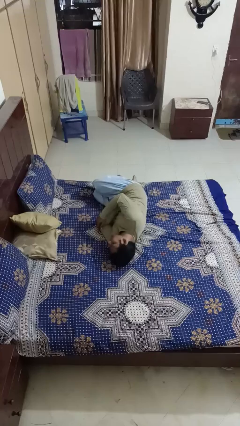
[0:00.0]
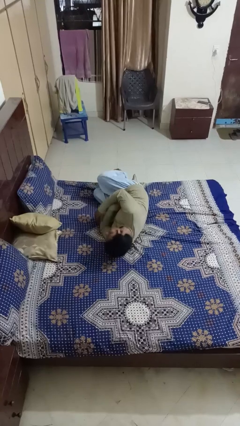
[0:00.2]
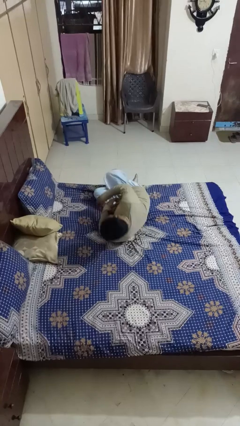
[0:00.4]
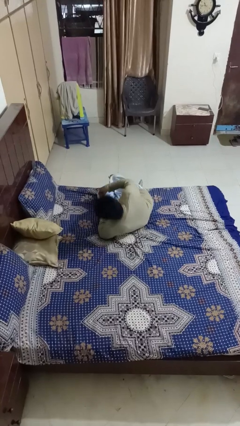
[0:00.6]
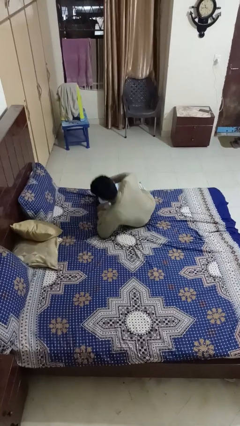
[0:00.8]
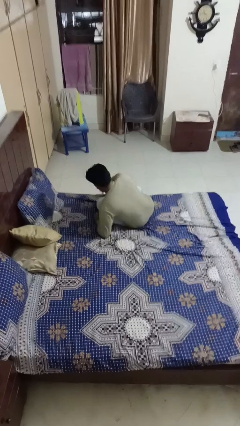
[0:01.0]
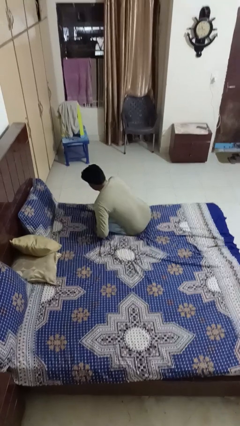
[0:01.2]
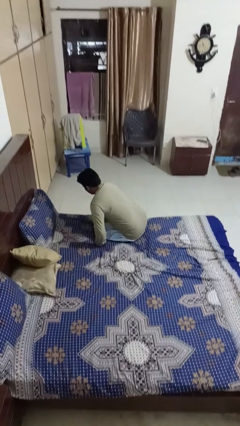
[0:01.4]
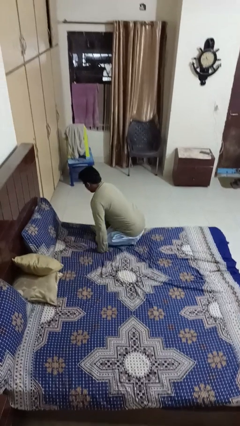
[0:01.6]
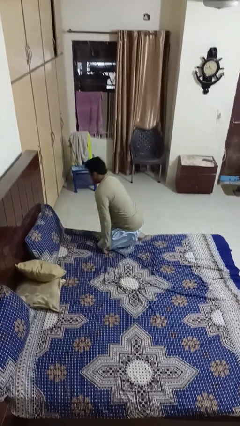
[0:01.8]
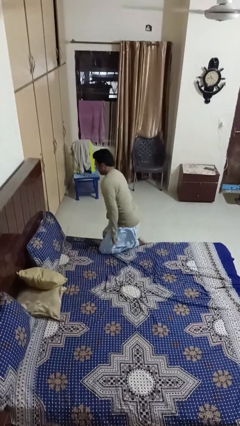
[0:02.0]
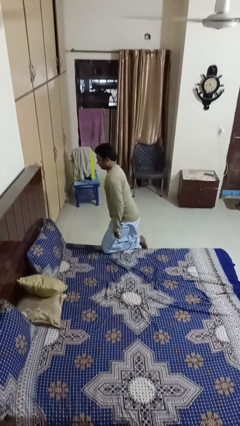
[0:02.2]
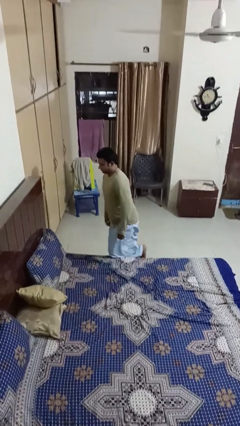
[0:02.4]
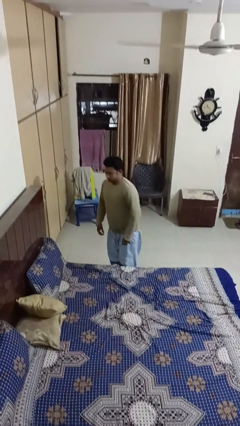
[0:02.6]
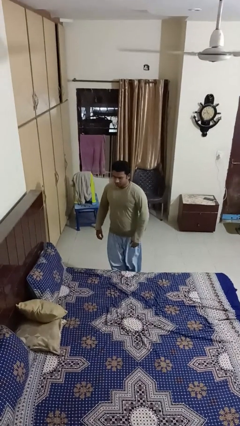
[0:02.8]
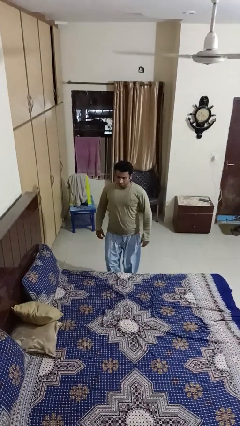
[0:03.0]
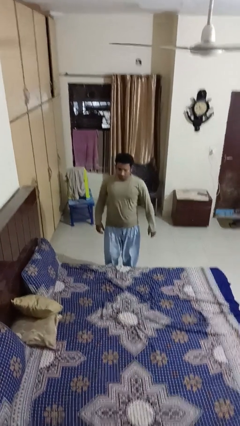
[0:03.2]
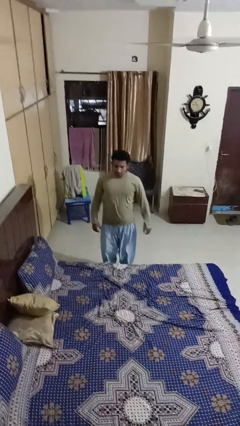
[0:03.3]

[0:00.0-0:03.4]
person stands up

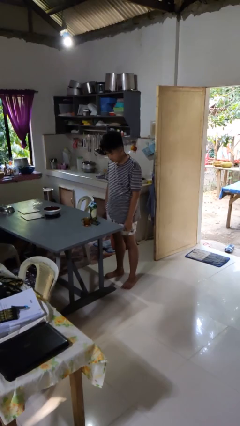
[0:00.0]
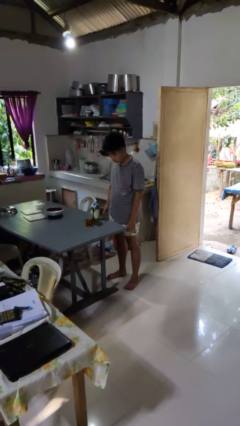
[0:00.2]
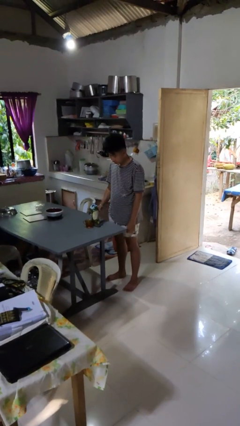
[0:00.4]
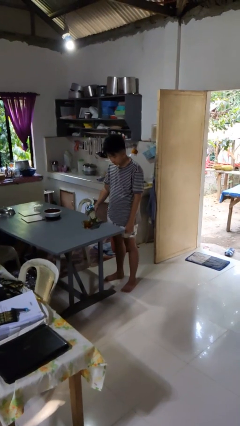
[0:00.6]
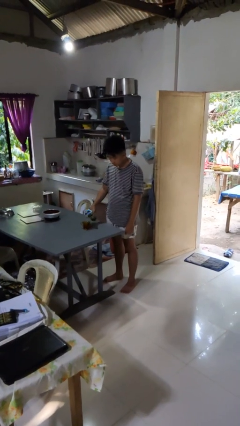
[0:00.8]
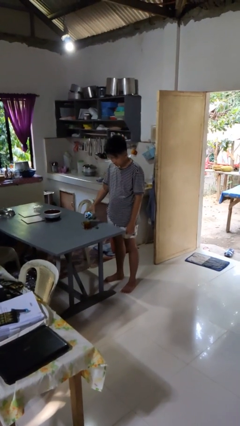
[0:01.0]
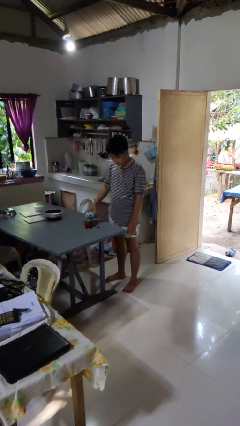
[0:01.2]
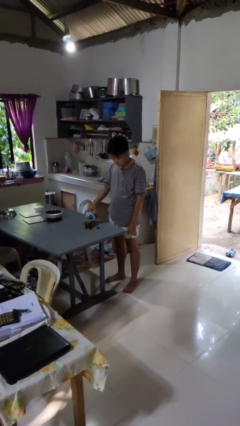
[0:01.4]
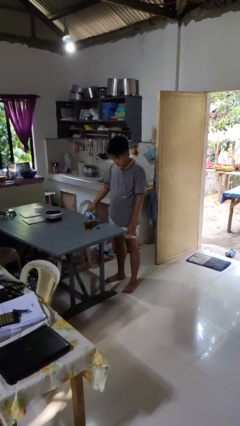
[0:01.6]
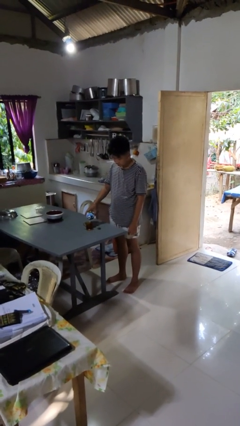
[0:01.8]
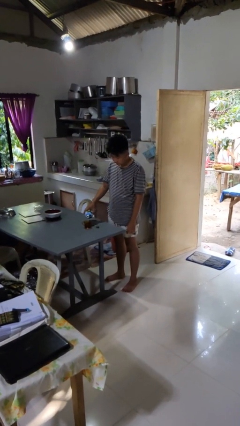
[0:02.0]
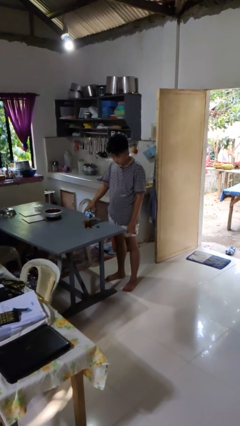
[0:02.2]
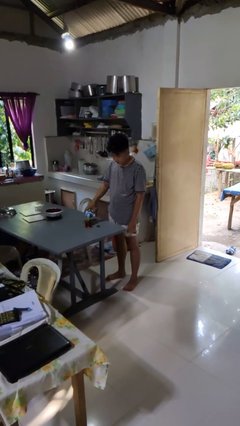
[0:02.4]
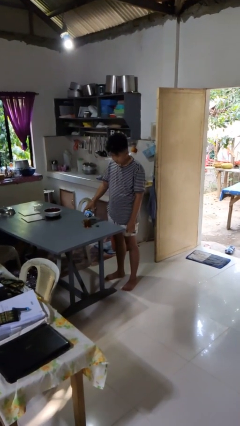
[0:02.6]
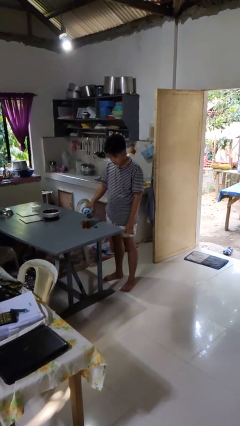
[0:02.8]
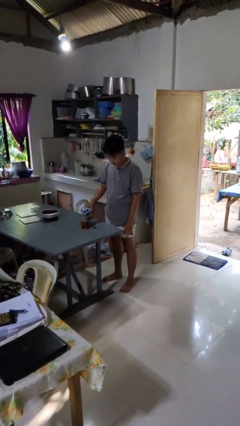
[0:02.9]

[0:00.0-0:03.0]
person pours liquid into cup

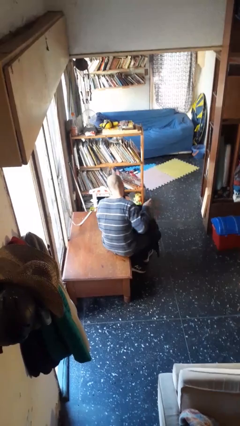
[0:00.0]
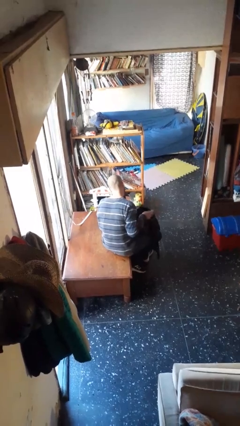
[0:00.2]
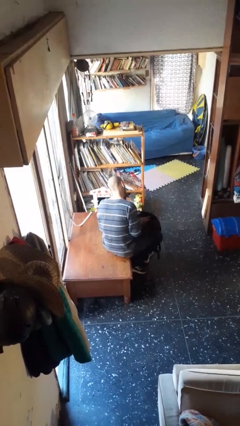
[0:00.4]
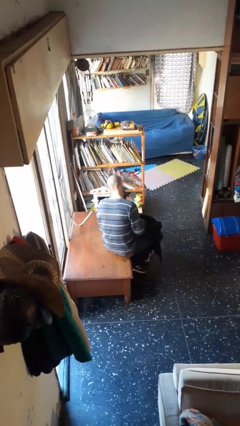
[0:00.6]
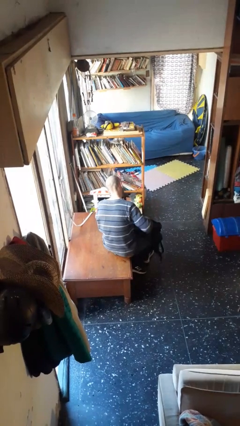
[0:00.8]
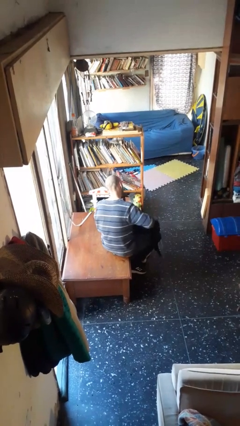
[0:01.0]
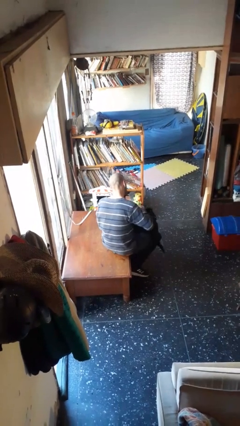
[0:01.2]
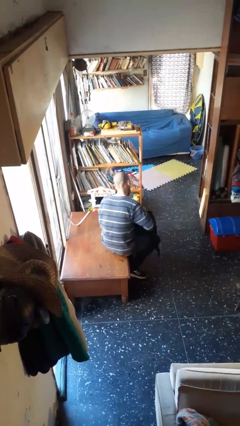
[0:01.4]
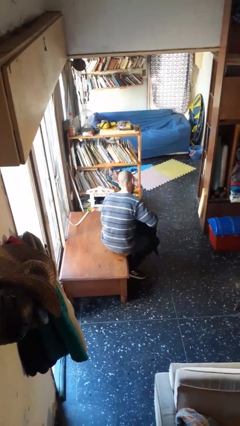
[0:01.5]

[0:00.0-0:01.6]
person puts object into backpack

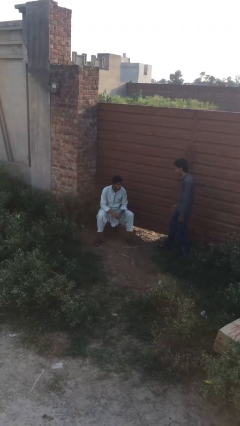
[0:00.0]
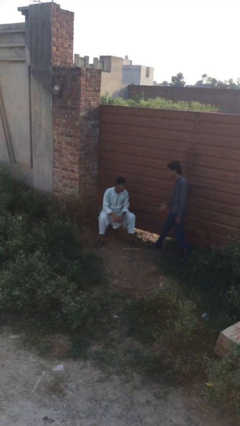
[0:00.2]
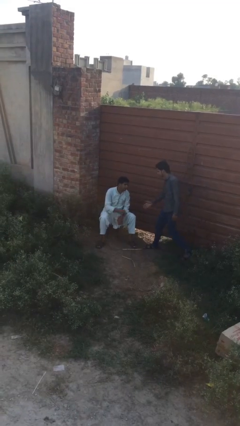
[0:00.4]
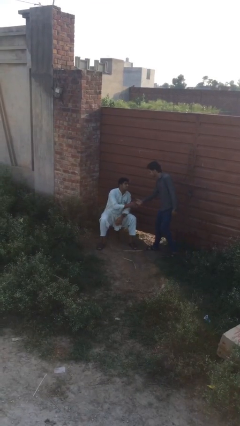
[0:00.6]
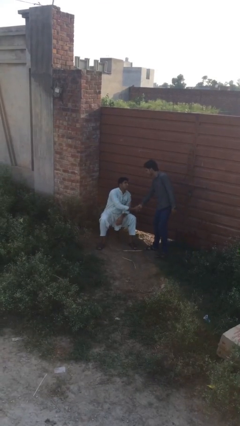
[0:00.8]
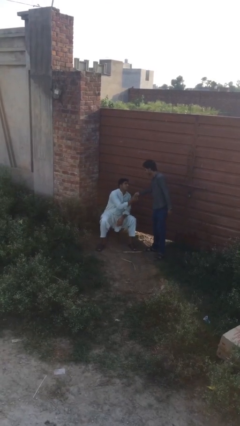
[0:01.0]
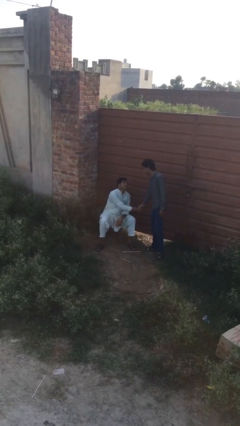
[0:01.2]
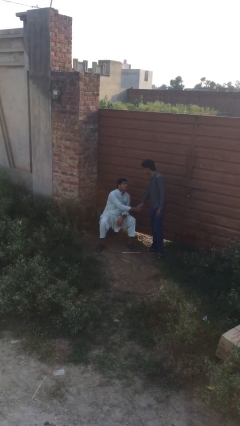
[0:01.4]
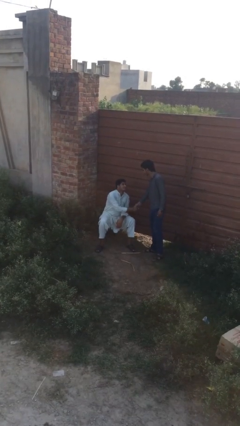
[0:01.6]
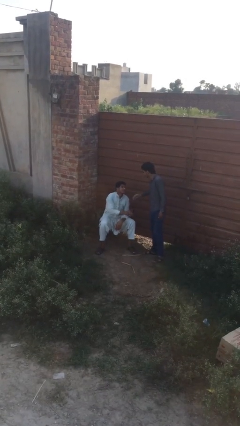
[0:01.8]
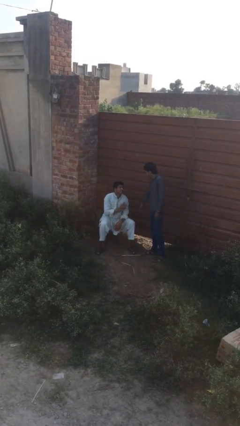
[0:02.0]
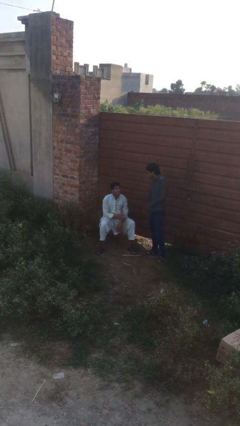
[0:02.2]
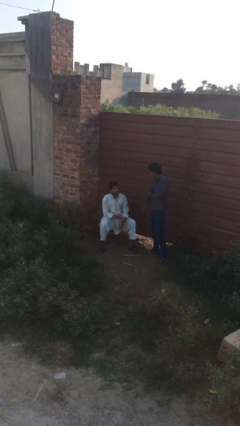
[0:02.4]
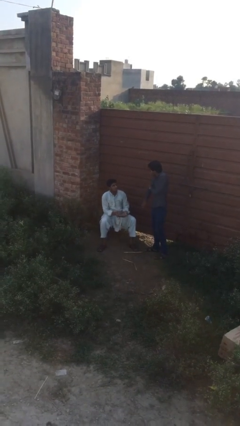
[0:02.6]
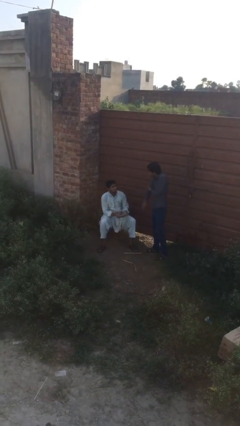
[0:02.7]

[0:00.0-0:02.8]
person shakes hand

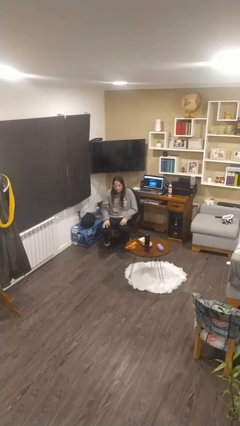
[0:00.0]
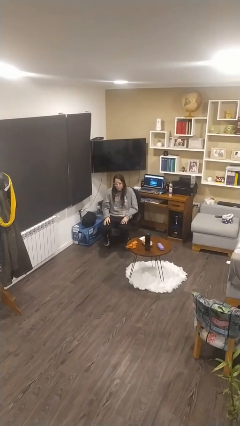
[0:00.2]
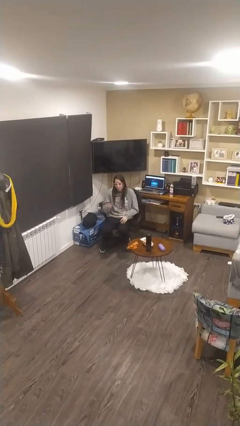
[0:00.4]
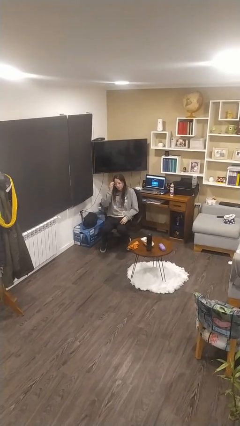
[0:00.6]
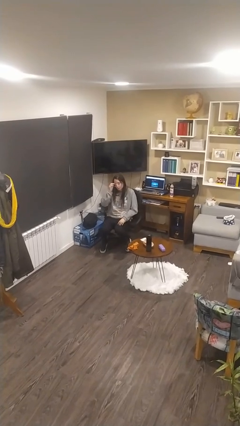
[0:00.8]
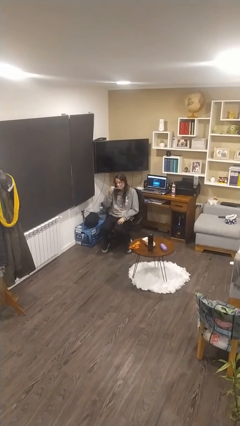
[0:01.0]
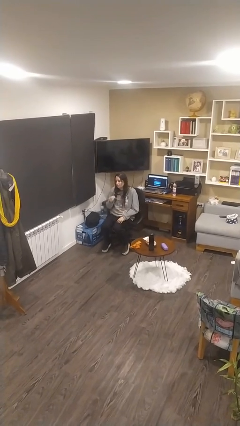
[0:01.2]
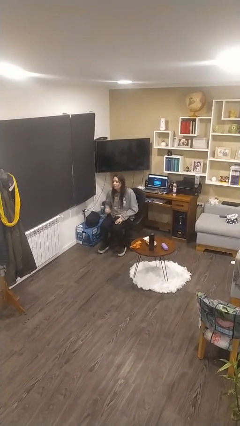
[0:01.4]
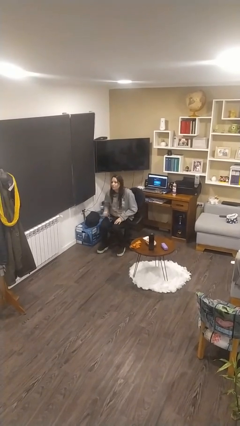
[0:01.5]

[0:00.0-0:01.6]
person takes off glasses

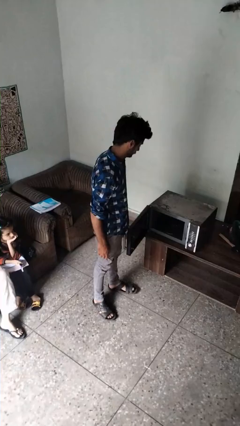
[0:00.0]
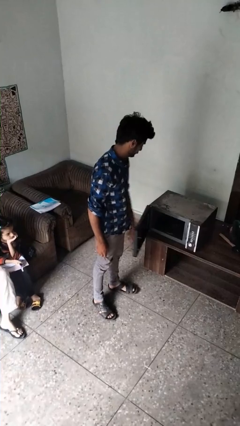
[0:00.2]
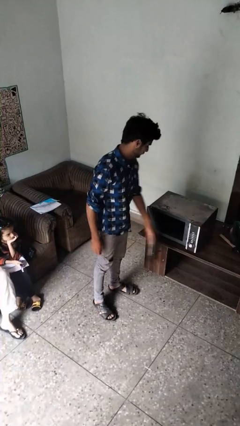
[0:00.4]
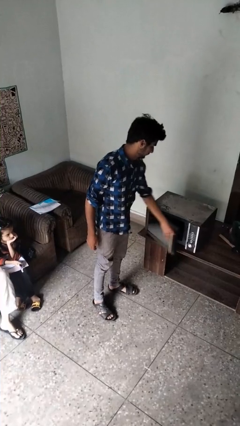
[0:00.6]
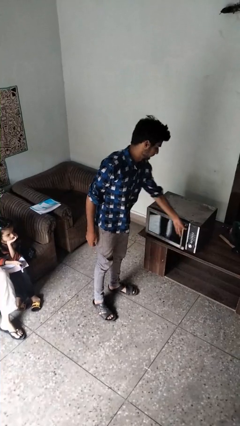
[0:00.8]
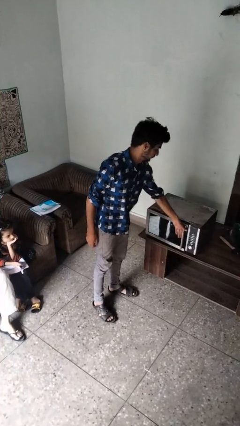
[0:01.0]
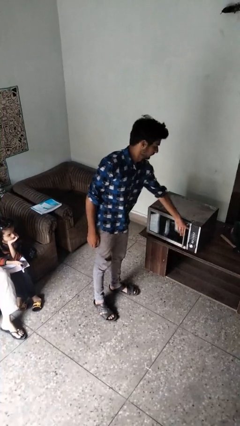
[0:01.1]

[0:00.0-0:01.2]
person closes microwave

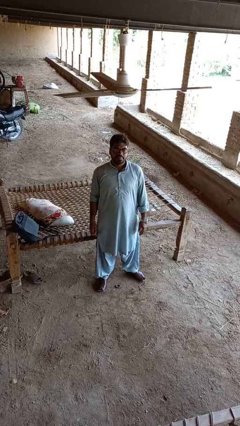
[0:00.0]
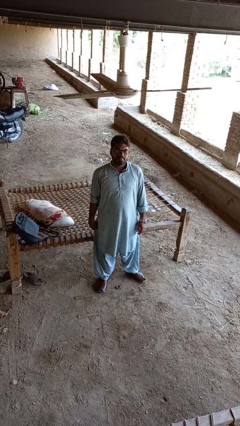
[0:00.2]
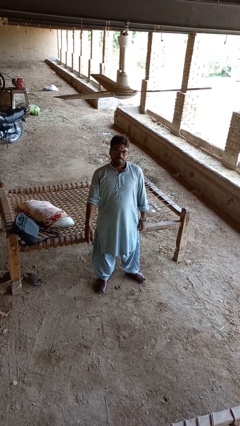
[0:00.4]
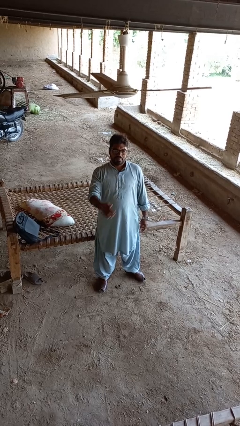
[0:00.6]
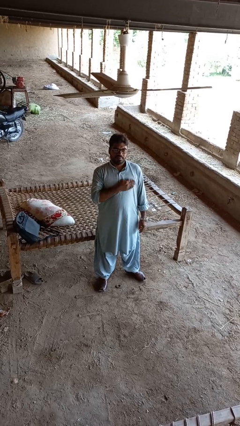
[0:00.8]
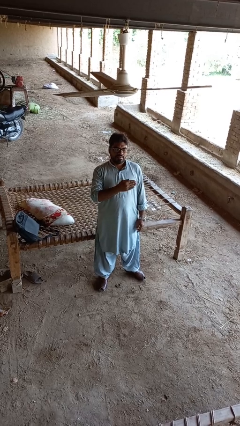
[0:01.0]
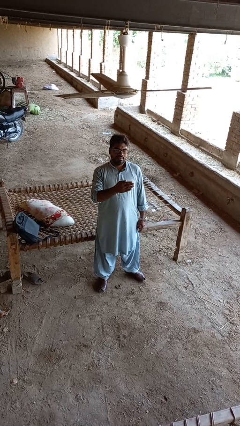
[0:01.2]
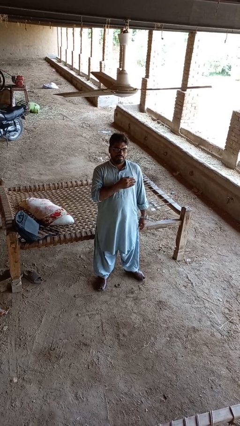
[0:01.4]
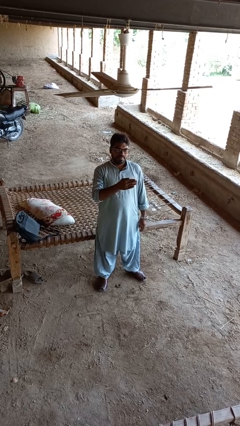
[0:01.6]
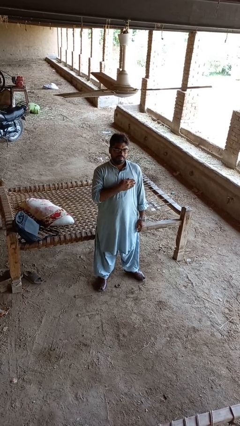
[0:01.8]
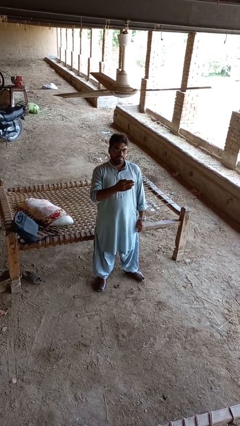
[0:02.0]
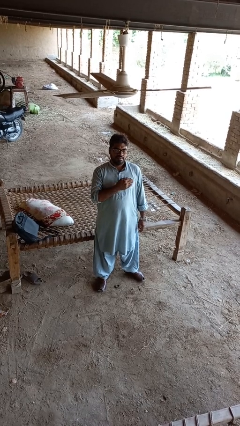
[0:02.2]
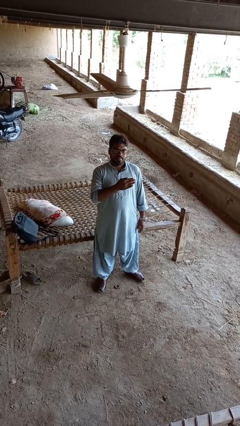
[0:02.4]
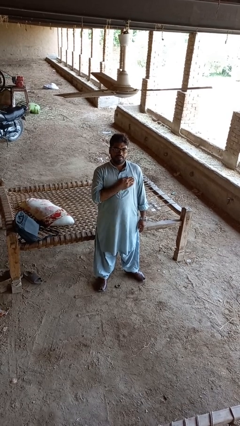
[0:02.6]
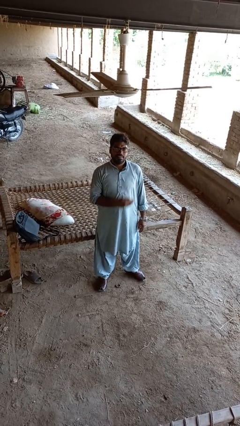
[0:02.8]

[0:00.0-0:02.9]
person drums on chest

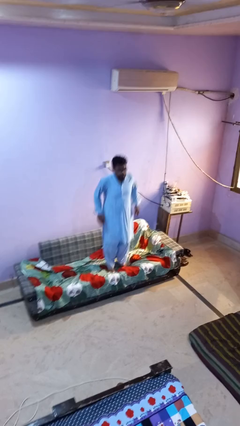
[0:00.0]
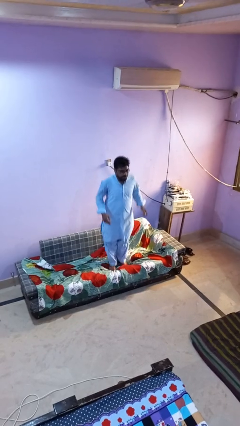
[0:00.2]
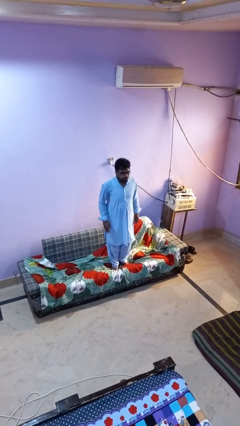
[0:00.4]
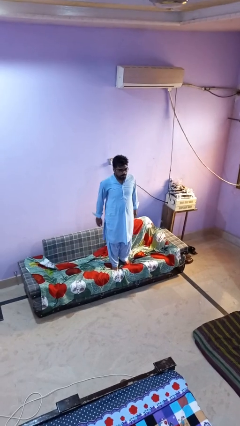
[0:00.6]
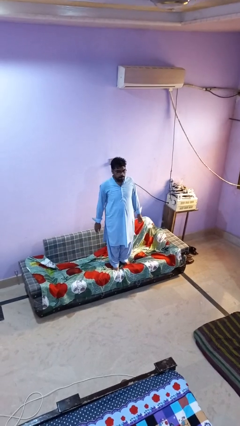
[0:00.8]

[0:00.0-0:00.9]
person jumps on couch
